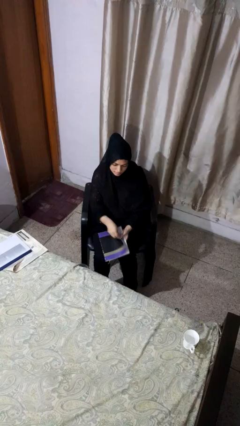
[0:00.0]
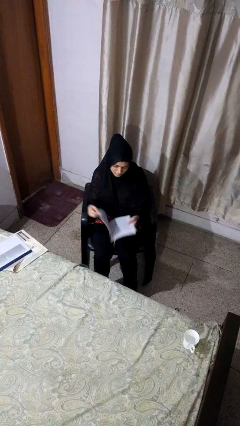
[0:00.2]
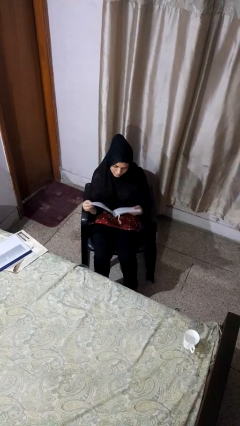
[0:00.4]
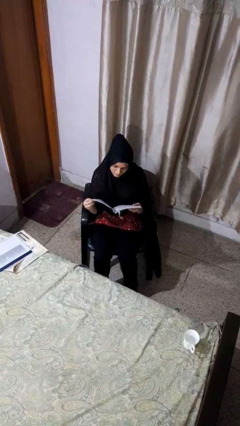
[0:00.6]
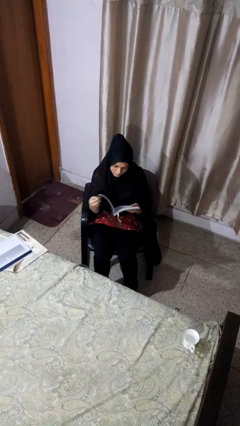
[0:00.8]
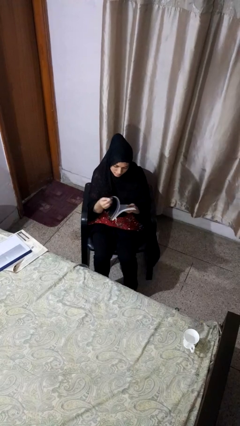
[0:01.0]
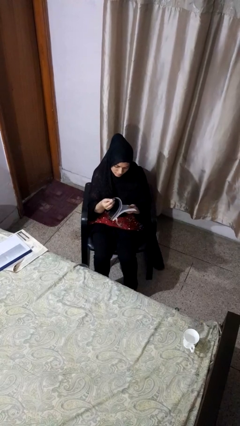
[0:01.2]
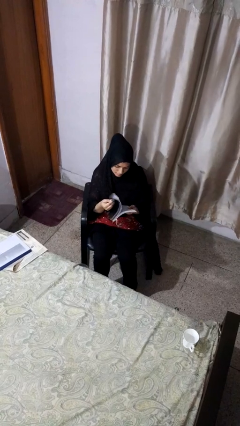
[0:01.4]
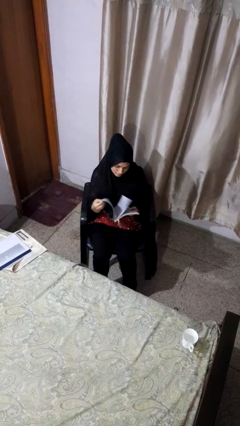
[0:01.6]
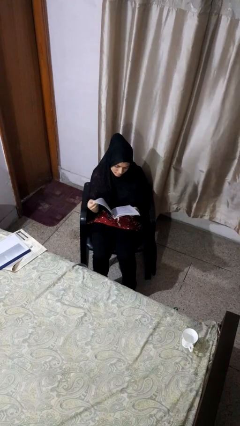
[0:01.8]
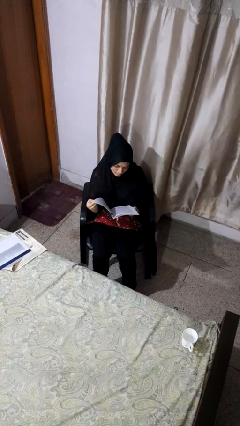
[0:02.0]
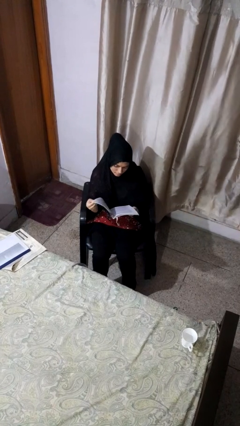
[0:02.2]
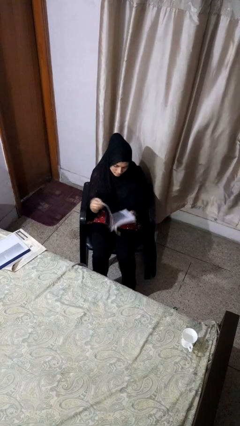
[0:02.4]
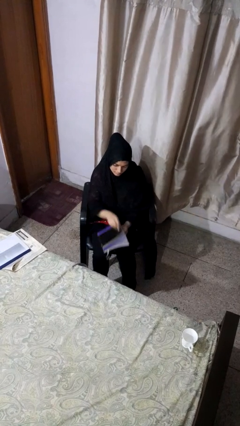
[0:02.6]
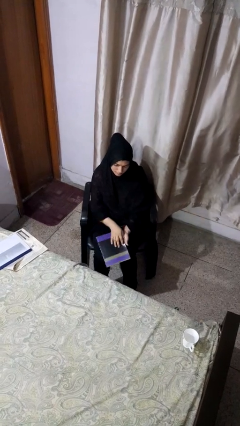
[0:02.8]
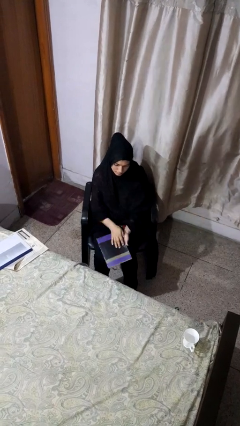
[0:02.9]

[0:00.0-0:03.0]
person reads book

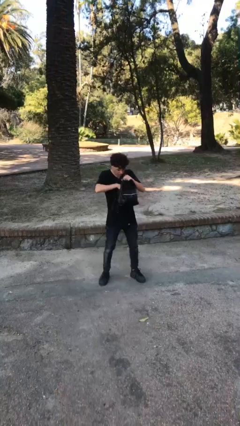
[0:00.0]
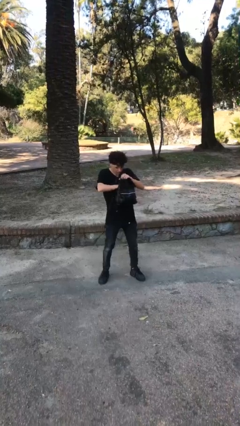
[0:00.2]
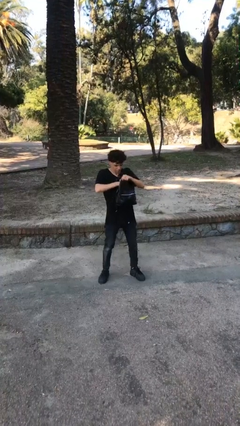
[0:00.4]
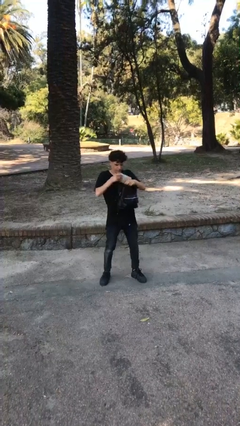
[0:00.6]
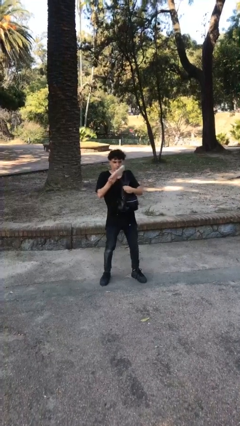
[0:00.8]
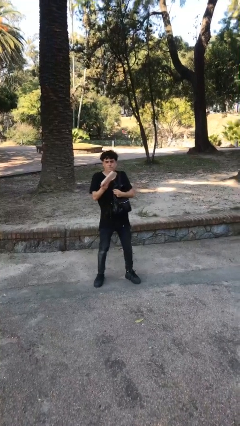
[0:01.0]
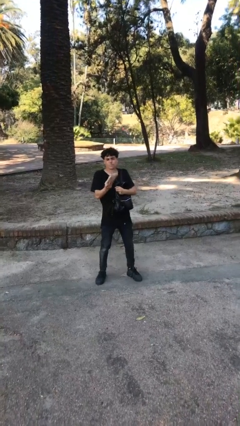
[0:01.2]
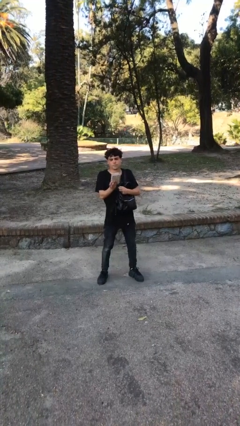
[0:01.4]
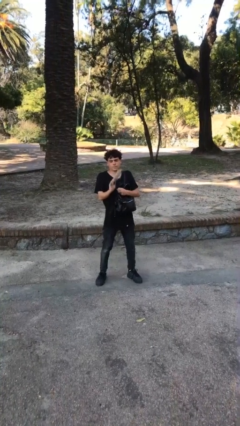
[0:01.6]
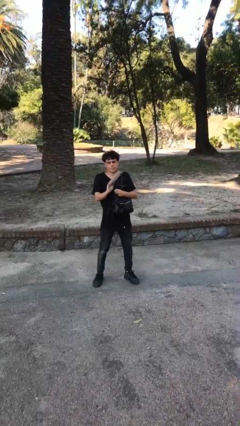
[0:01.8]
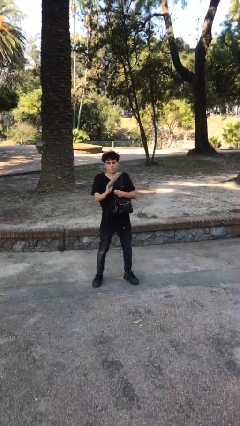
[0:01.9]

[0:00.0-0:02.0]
person takes object from purse

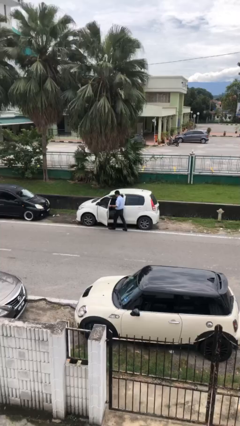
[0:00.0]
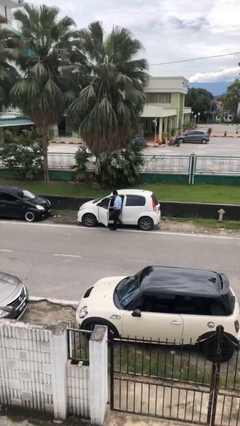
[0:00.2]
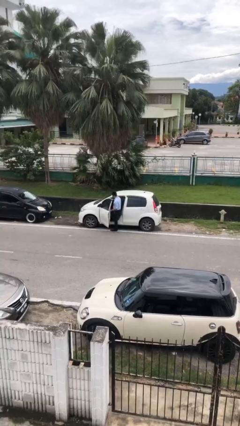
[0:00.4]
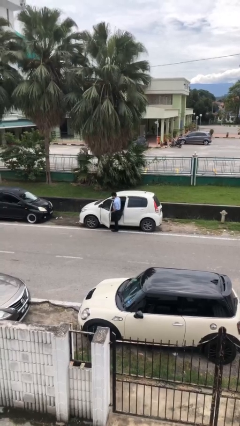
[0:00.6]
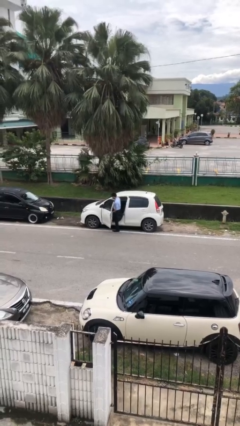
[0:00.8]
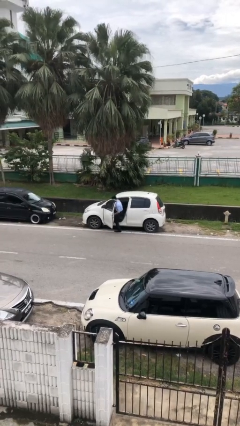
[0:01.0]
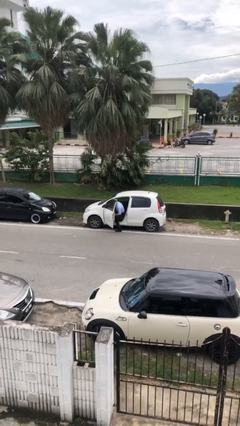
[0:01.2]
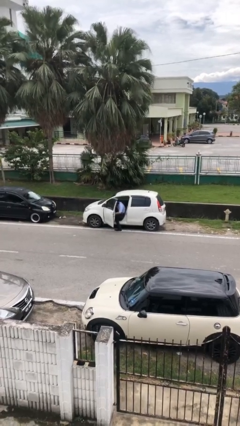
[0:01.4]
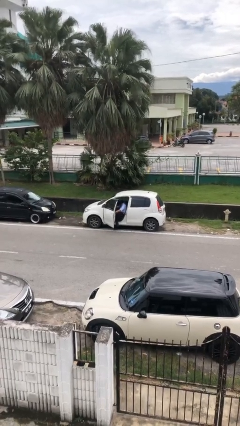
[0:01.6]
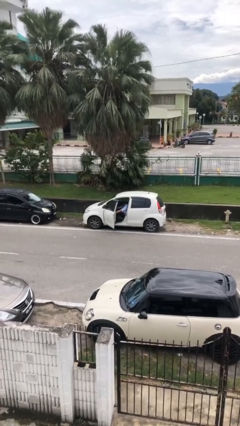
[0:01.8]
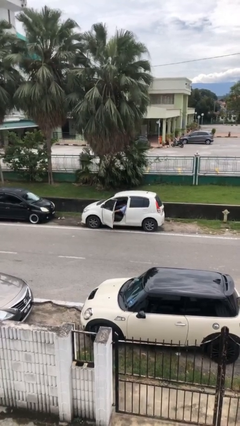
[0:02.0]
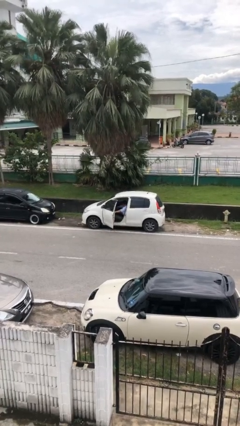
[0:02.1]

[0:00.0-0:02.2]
person enters car

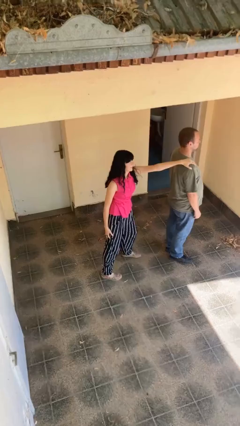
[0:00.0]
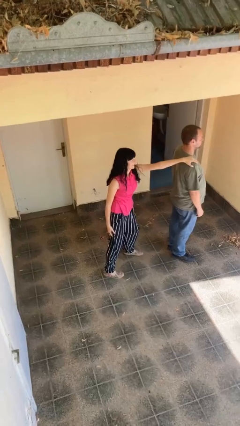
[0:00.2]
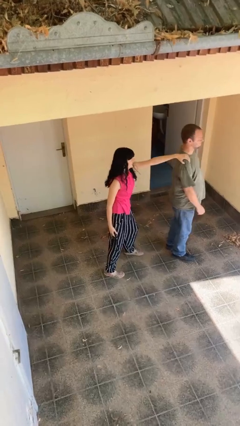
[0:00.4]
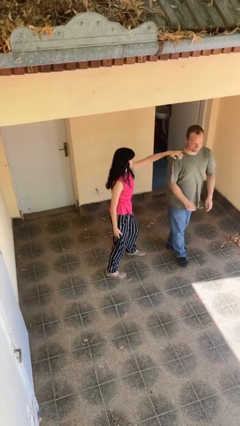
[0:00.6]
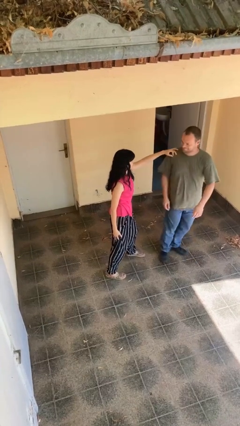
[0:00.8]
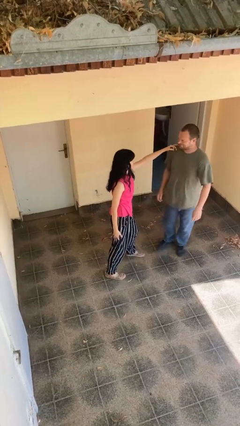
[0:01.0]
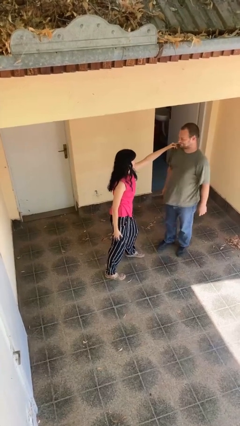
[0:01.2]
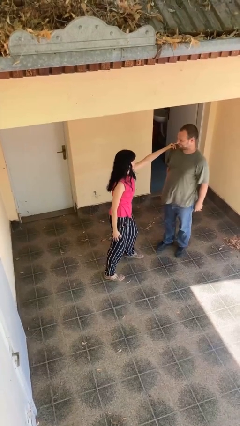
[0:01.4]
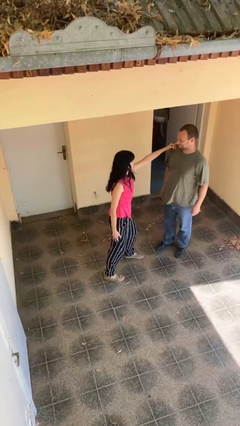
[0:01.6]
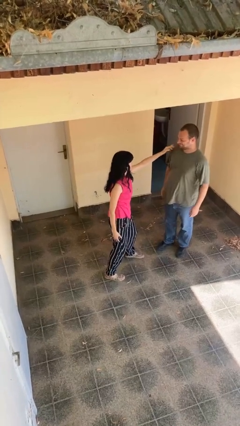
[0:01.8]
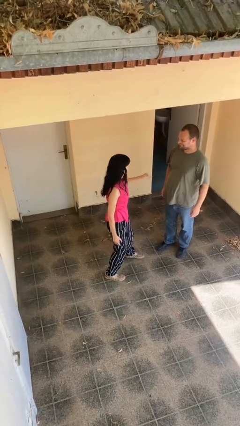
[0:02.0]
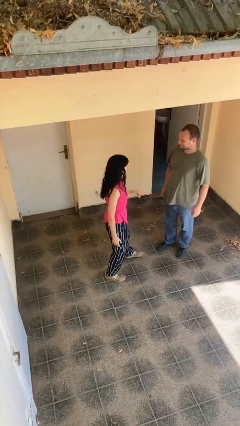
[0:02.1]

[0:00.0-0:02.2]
person spins person around

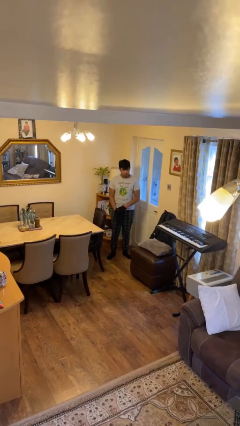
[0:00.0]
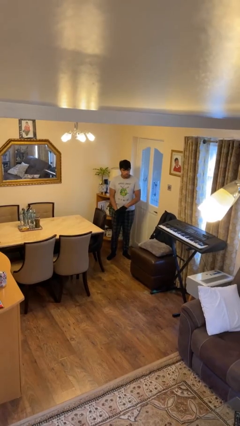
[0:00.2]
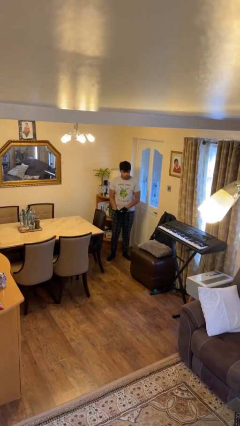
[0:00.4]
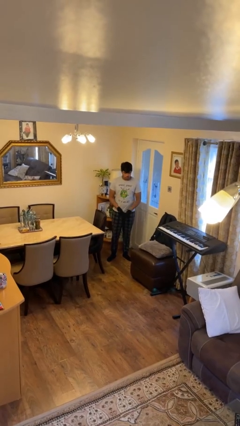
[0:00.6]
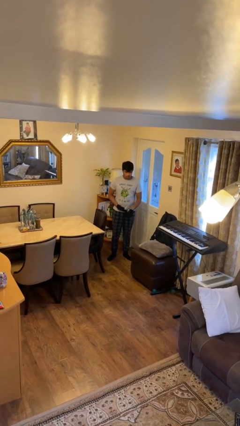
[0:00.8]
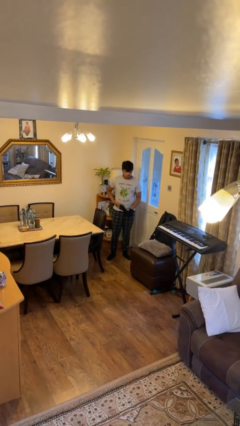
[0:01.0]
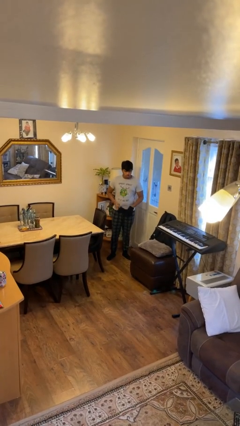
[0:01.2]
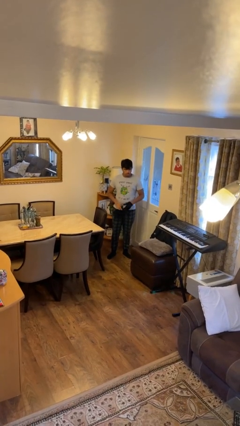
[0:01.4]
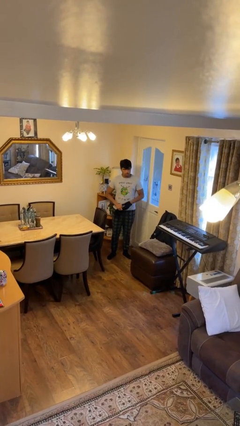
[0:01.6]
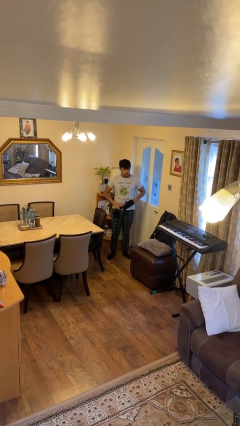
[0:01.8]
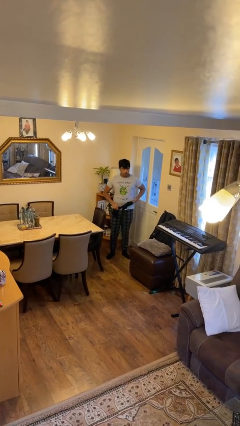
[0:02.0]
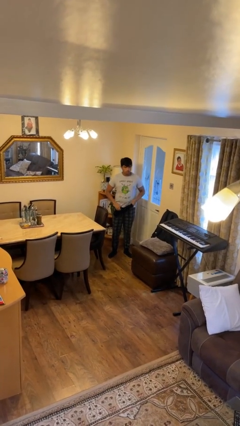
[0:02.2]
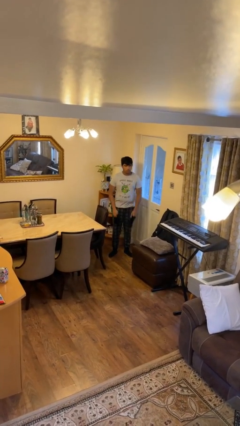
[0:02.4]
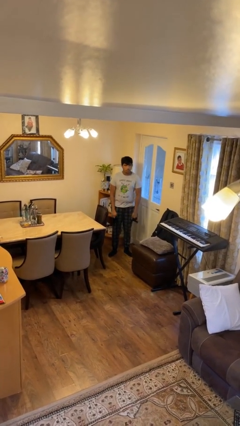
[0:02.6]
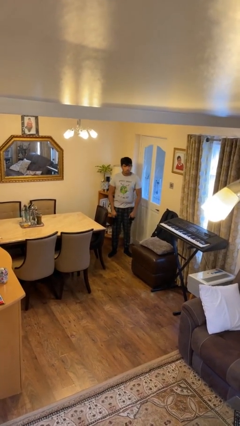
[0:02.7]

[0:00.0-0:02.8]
person takes off gloves

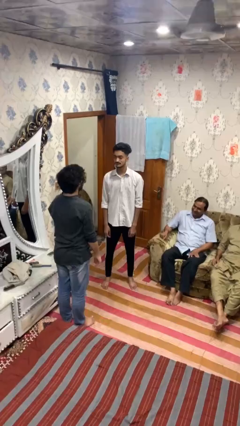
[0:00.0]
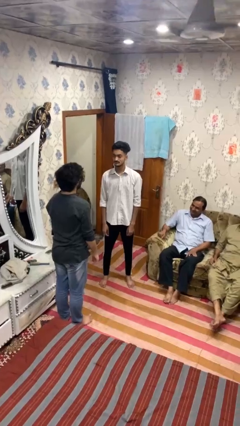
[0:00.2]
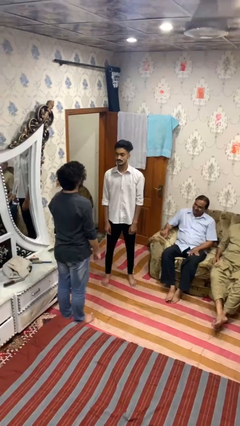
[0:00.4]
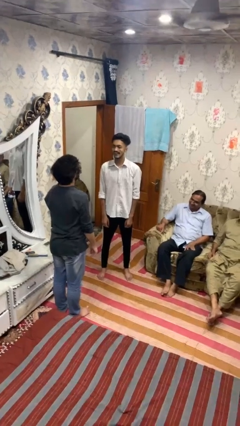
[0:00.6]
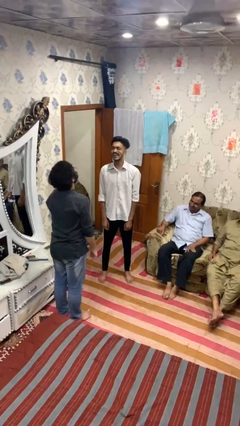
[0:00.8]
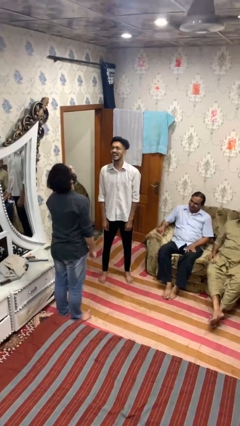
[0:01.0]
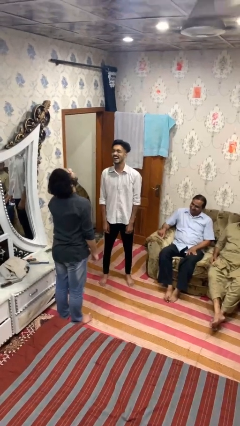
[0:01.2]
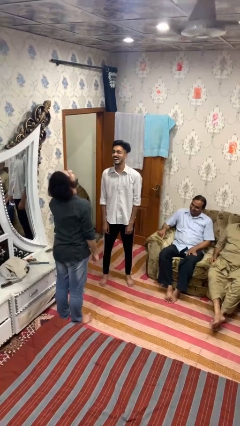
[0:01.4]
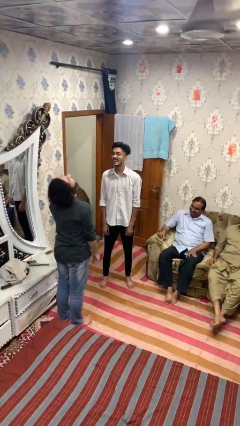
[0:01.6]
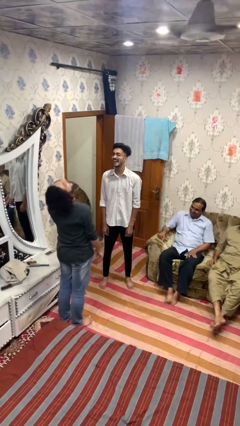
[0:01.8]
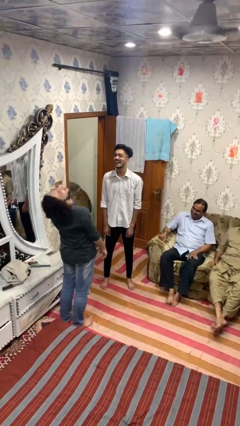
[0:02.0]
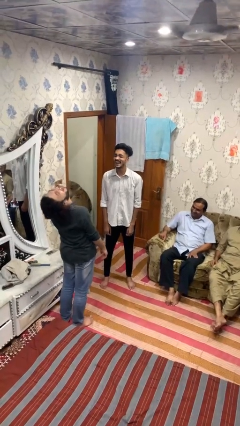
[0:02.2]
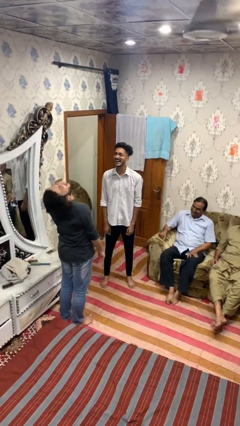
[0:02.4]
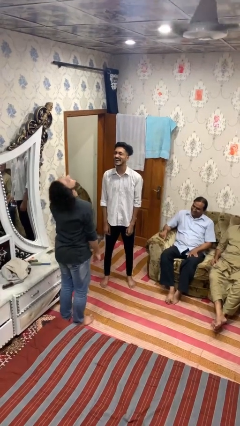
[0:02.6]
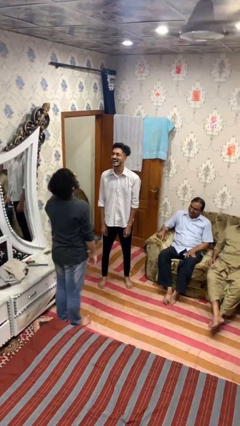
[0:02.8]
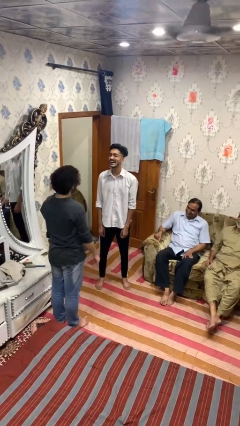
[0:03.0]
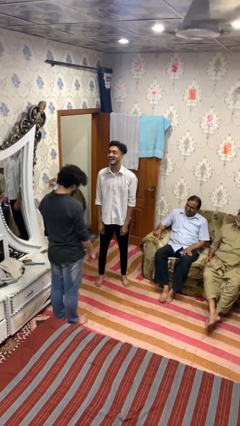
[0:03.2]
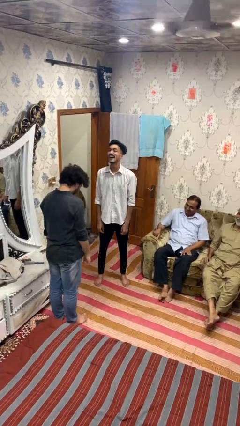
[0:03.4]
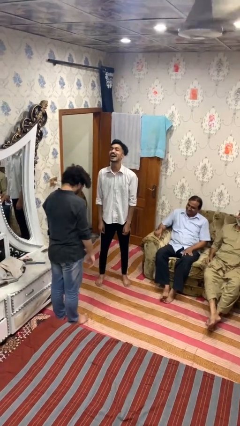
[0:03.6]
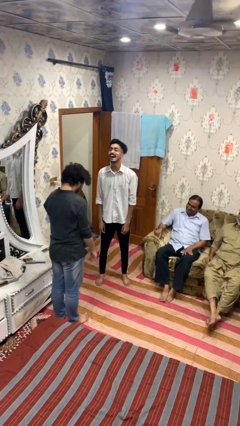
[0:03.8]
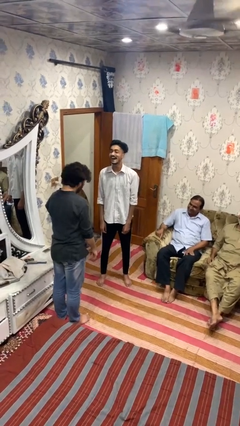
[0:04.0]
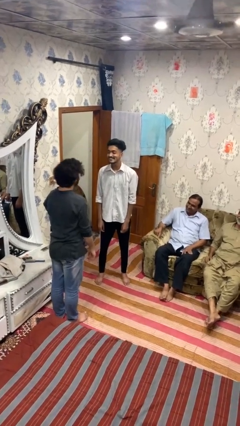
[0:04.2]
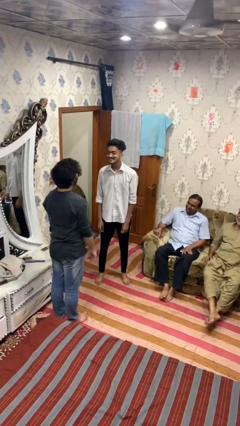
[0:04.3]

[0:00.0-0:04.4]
person laughs with person

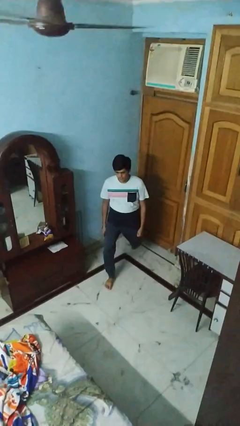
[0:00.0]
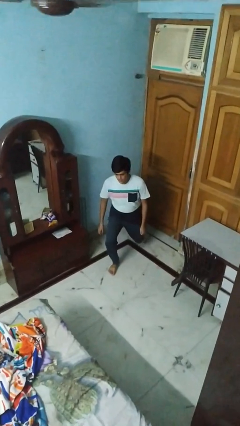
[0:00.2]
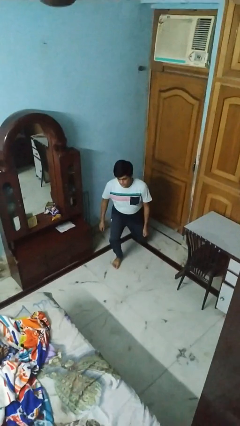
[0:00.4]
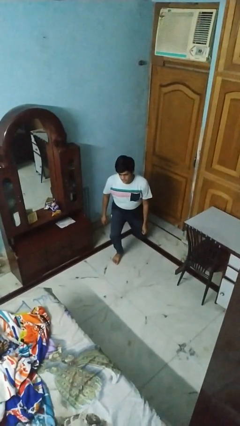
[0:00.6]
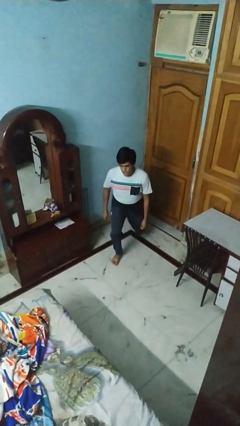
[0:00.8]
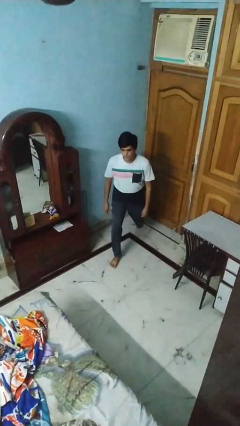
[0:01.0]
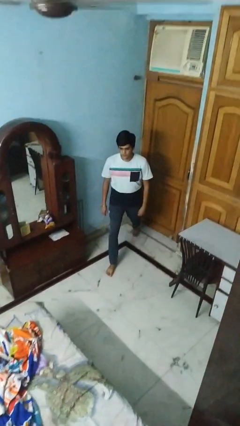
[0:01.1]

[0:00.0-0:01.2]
person exercises with lunges
